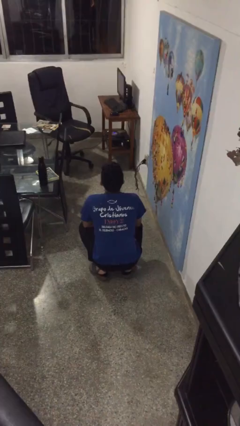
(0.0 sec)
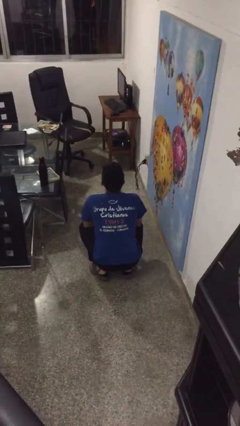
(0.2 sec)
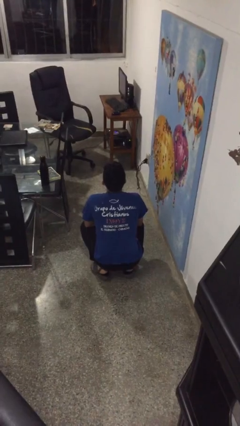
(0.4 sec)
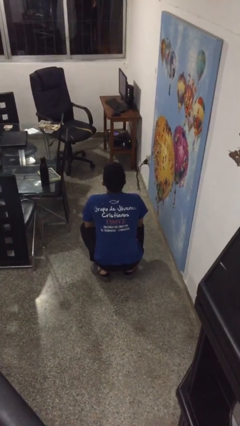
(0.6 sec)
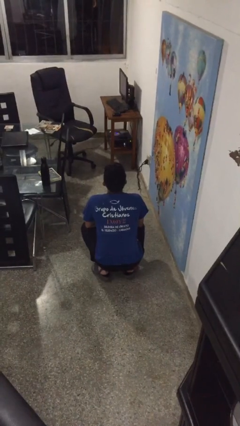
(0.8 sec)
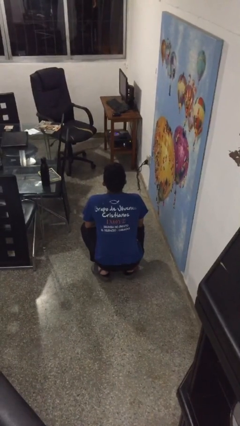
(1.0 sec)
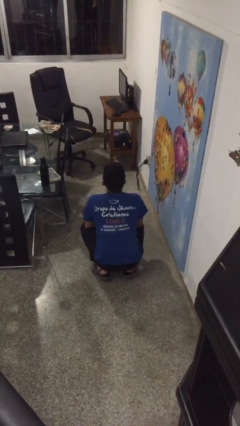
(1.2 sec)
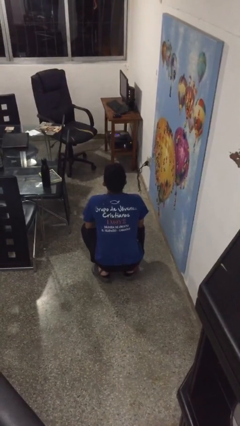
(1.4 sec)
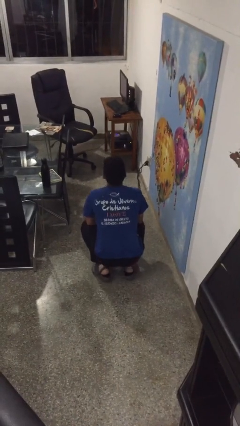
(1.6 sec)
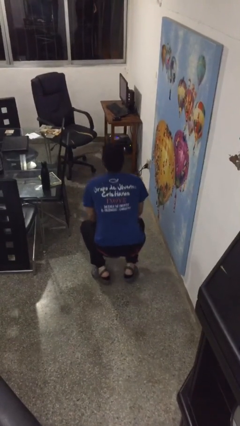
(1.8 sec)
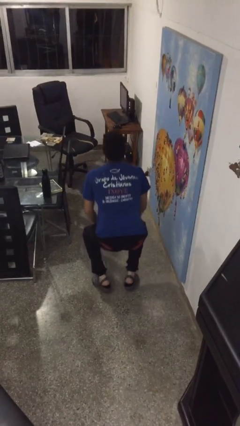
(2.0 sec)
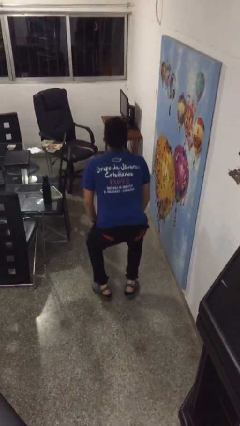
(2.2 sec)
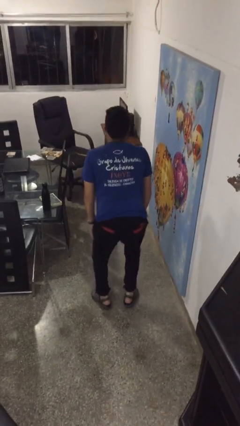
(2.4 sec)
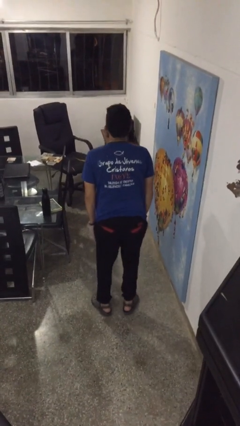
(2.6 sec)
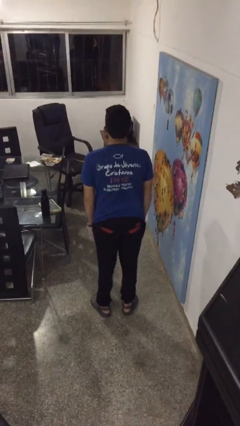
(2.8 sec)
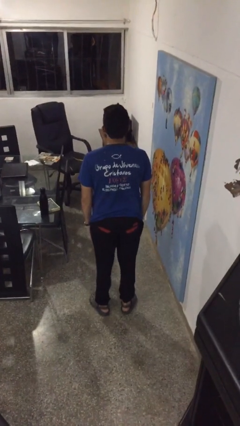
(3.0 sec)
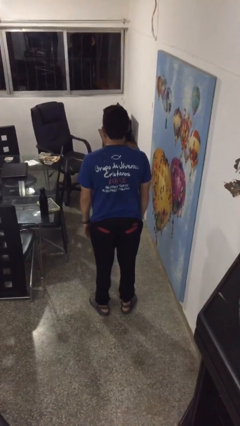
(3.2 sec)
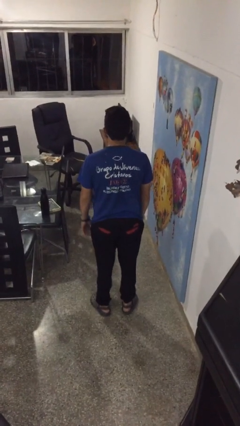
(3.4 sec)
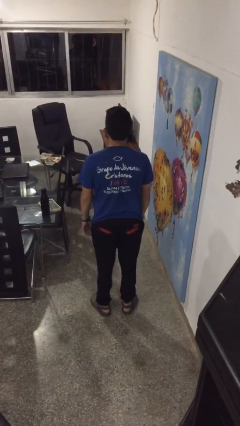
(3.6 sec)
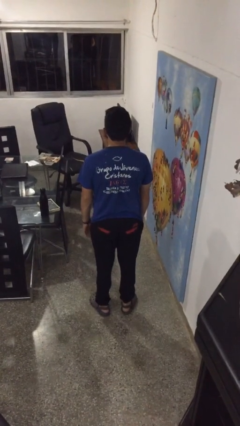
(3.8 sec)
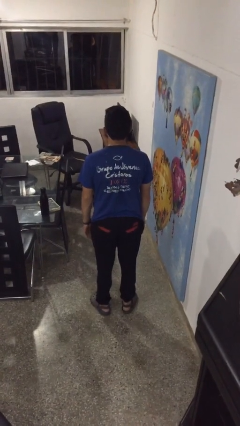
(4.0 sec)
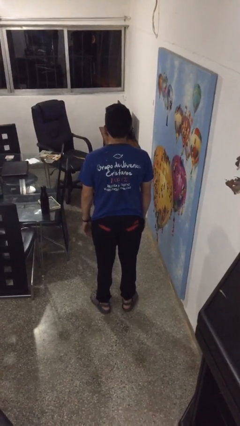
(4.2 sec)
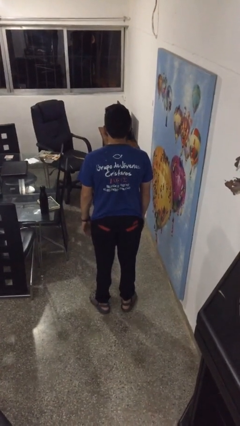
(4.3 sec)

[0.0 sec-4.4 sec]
person stands up

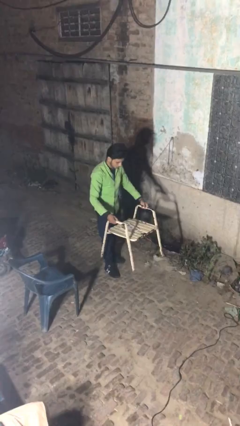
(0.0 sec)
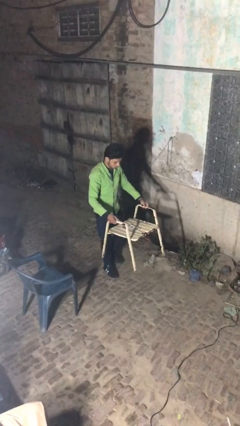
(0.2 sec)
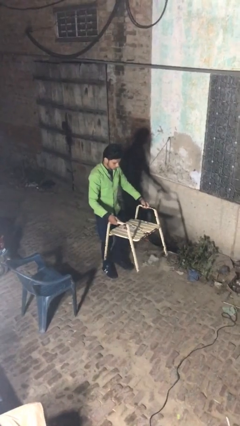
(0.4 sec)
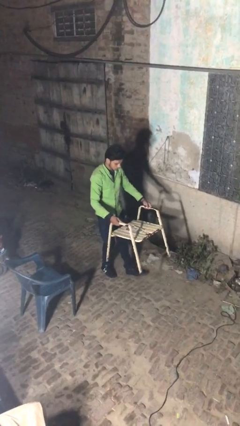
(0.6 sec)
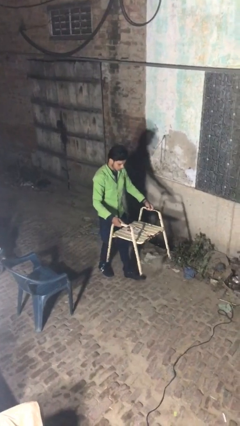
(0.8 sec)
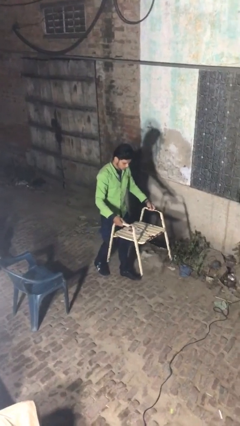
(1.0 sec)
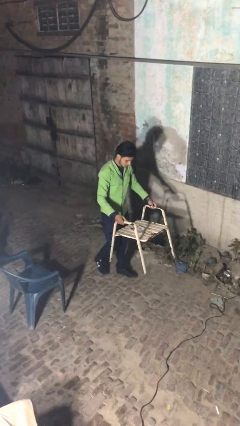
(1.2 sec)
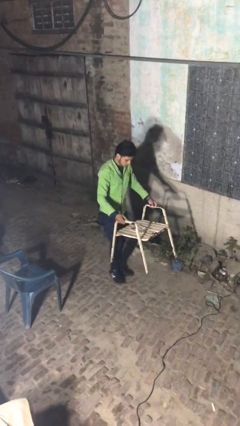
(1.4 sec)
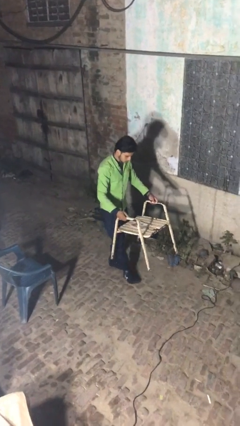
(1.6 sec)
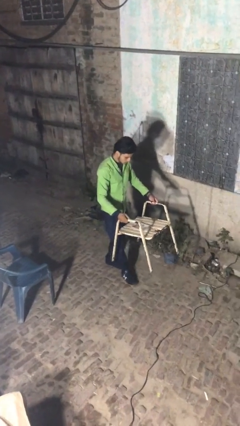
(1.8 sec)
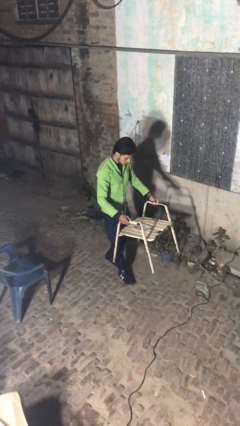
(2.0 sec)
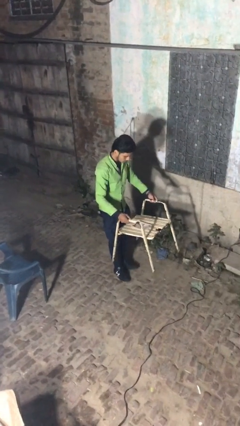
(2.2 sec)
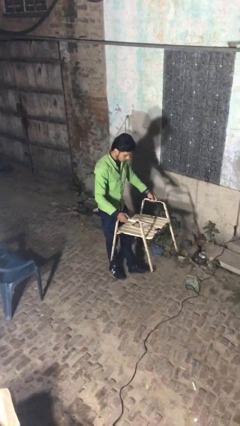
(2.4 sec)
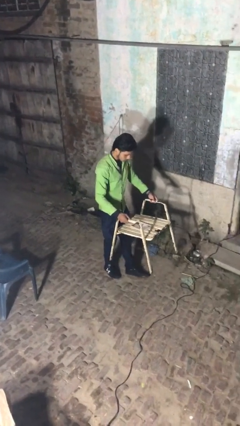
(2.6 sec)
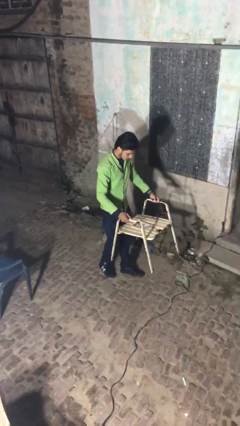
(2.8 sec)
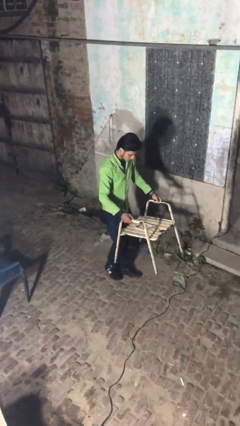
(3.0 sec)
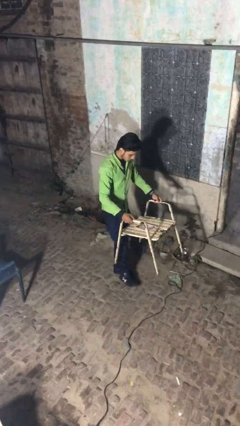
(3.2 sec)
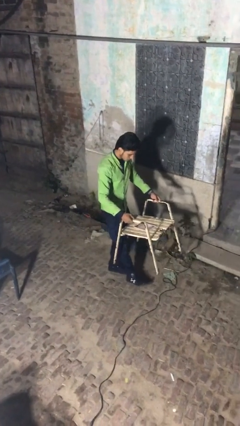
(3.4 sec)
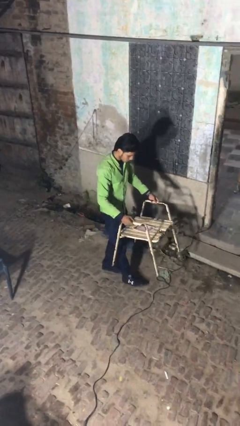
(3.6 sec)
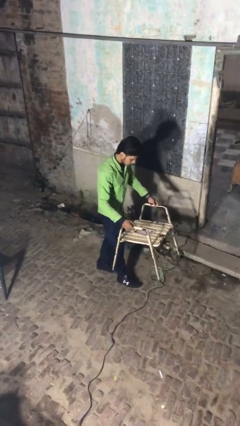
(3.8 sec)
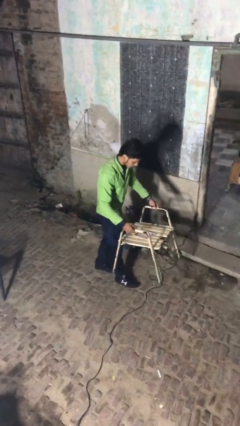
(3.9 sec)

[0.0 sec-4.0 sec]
person carries heavy object

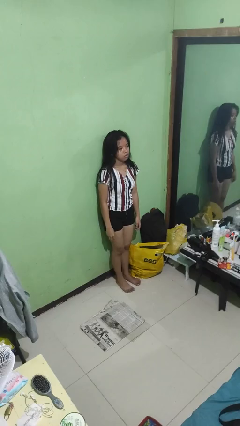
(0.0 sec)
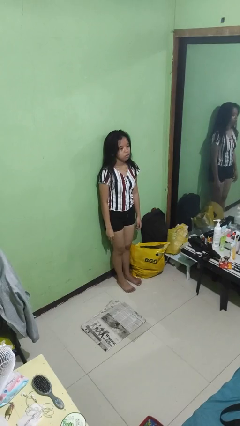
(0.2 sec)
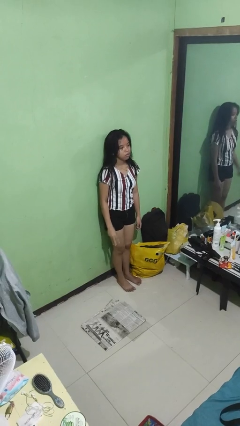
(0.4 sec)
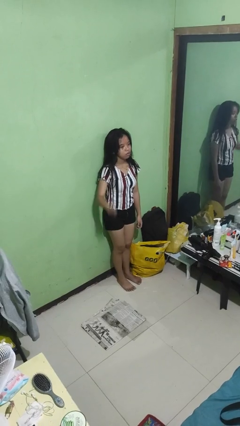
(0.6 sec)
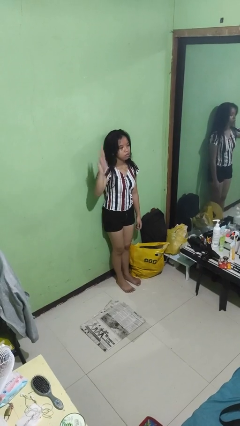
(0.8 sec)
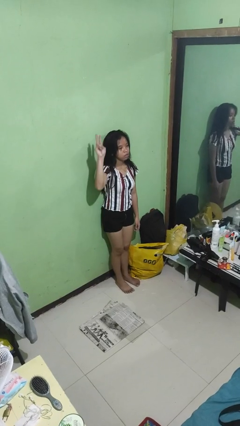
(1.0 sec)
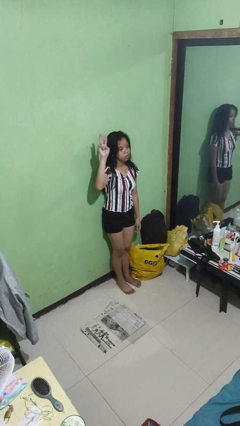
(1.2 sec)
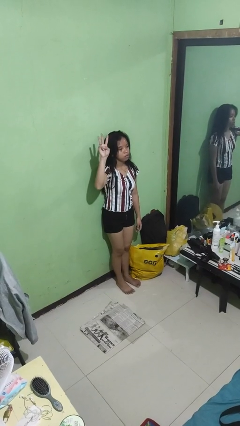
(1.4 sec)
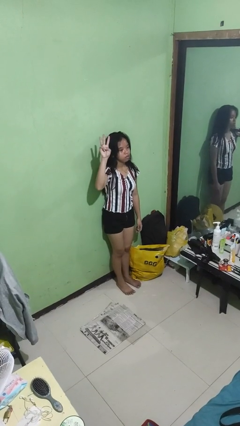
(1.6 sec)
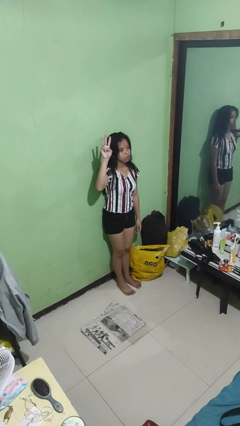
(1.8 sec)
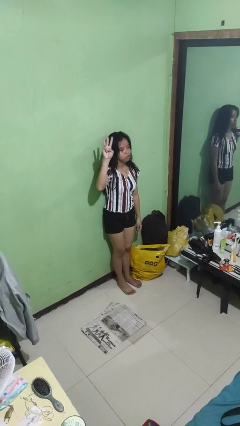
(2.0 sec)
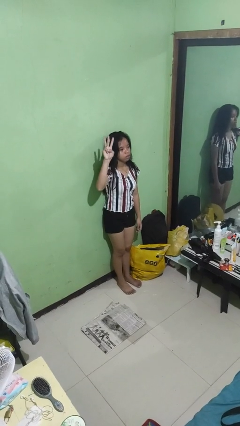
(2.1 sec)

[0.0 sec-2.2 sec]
person gestures number three

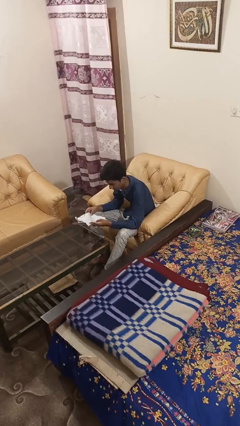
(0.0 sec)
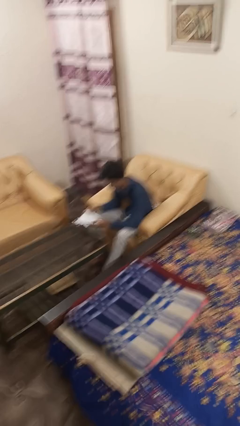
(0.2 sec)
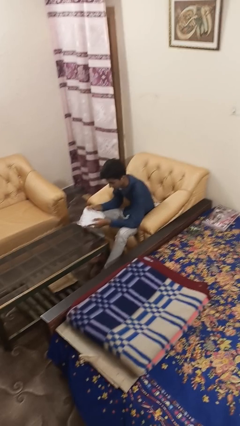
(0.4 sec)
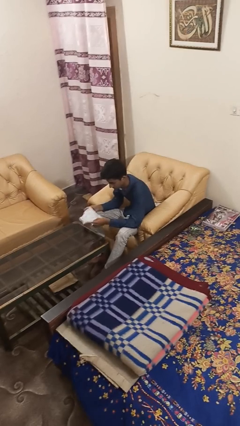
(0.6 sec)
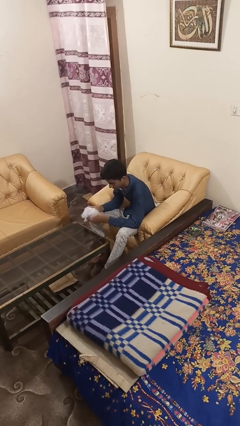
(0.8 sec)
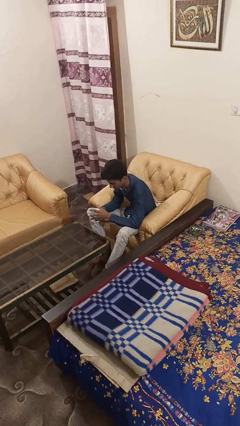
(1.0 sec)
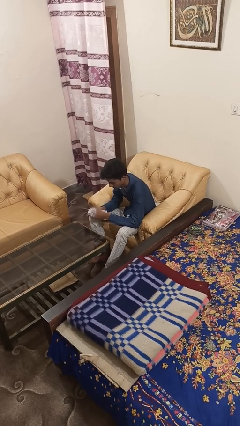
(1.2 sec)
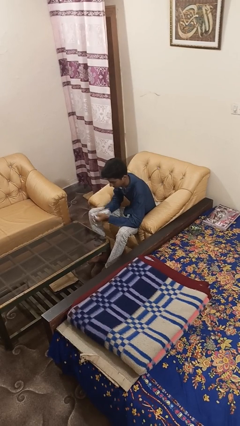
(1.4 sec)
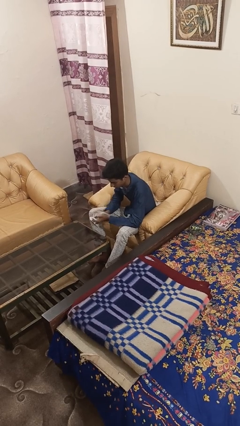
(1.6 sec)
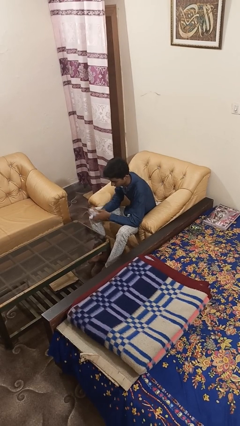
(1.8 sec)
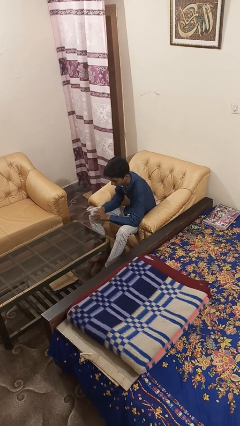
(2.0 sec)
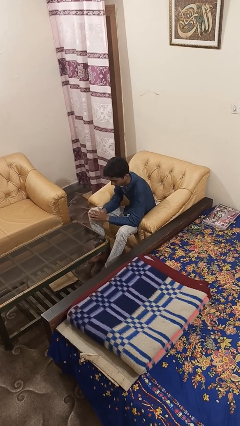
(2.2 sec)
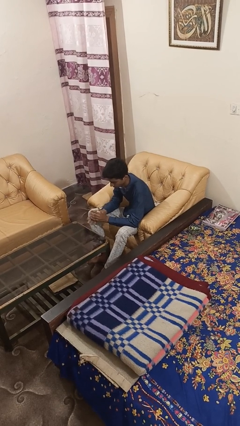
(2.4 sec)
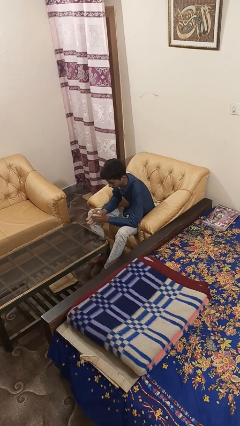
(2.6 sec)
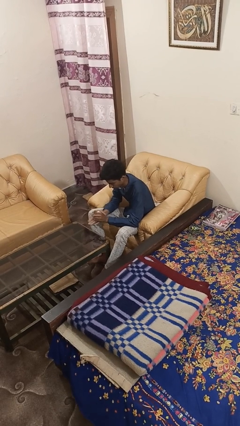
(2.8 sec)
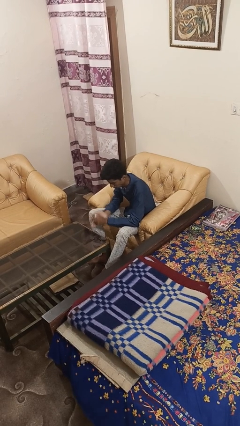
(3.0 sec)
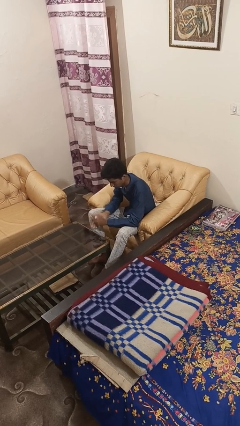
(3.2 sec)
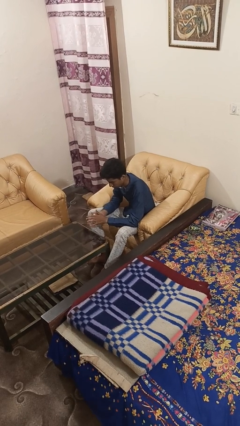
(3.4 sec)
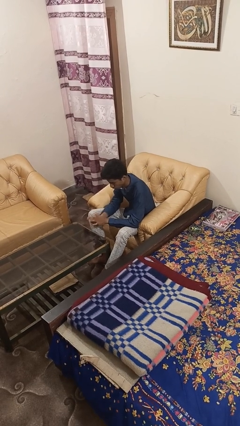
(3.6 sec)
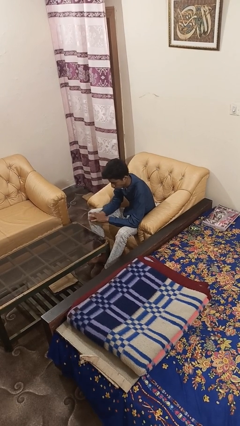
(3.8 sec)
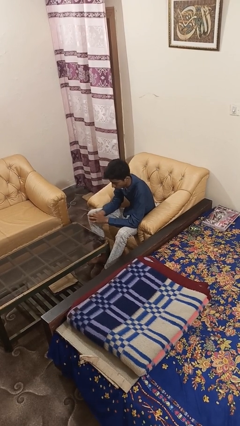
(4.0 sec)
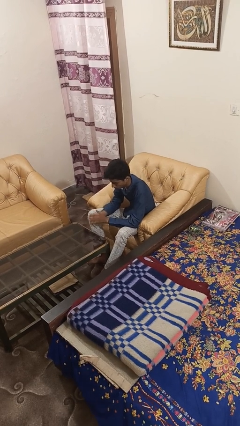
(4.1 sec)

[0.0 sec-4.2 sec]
person crumples paper

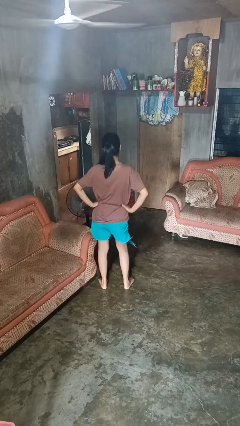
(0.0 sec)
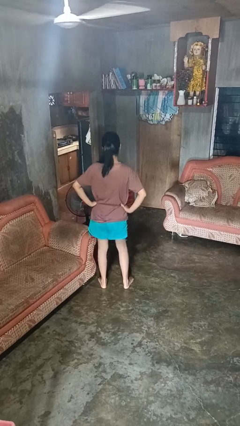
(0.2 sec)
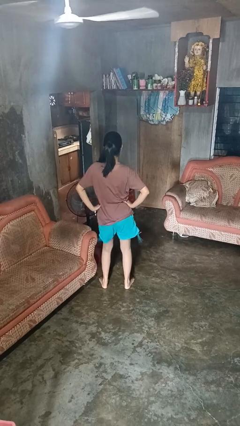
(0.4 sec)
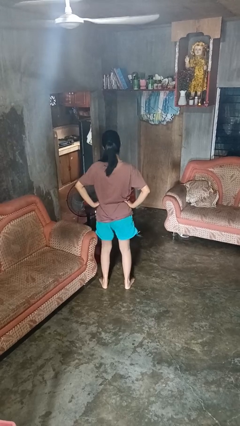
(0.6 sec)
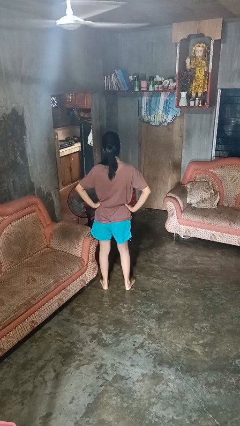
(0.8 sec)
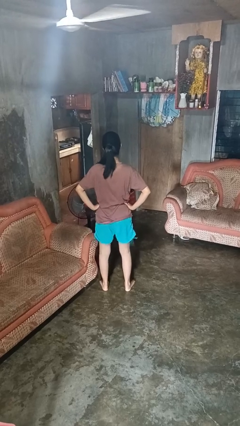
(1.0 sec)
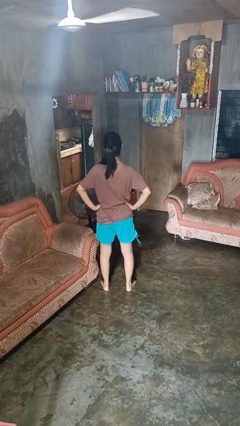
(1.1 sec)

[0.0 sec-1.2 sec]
person wiggles hips

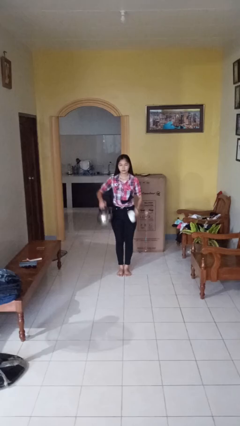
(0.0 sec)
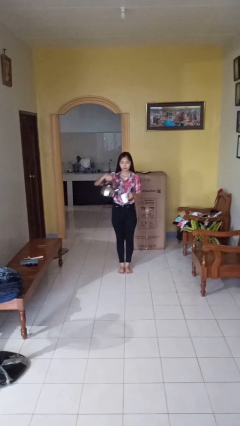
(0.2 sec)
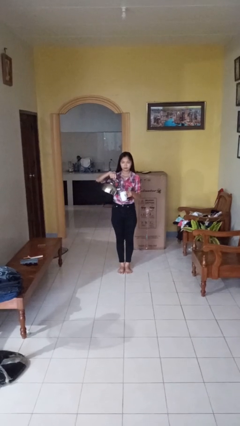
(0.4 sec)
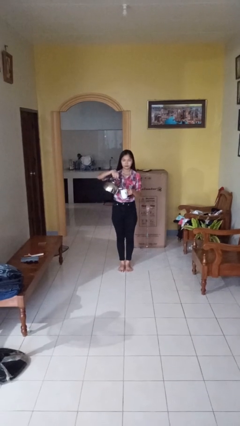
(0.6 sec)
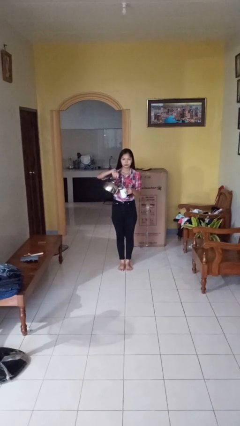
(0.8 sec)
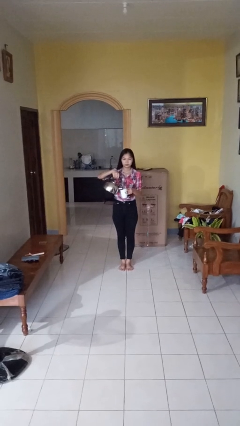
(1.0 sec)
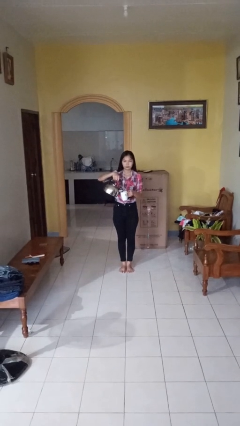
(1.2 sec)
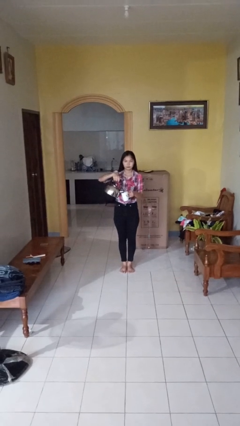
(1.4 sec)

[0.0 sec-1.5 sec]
person pours coffee into mug
